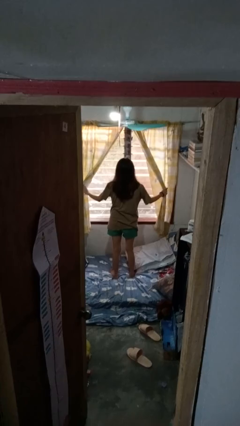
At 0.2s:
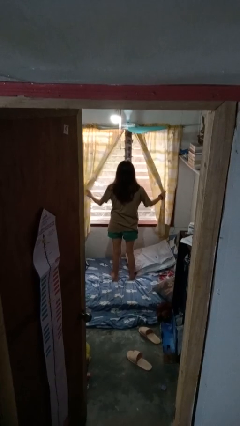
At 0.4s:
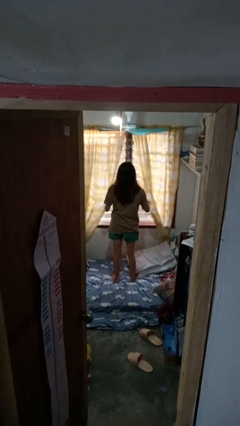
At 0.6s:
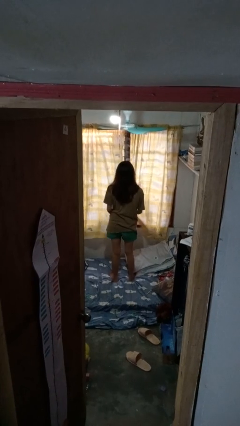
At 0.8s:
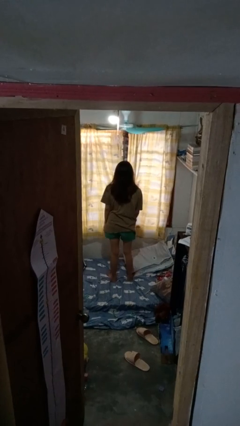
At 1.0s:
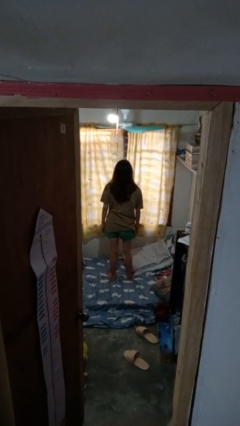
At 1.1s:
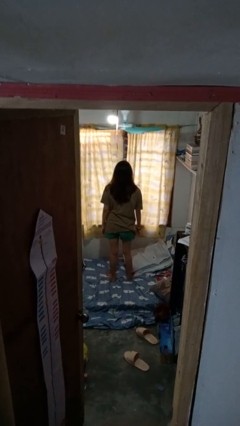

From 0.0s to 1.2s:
person closes curtains

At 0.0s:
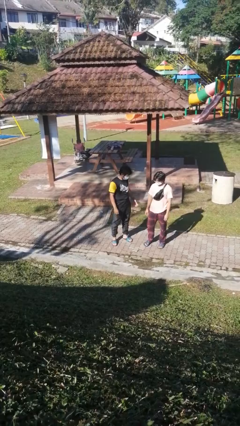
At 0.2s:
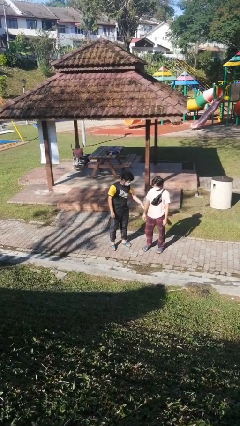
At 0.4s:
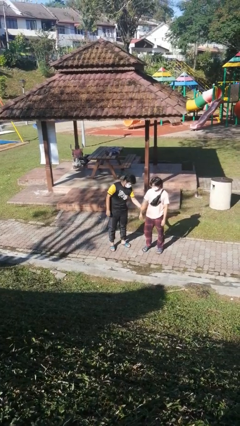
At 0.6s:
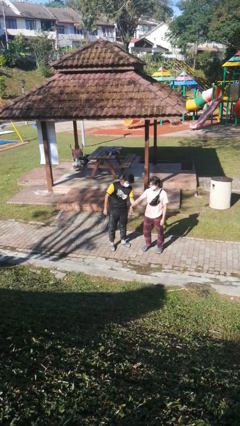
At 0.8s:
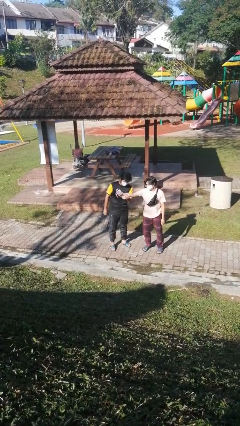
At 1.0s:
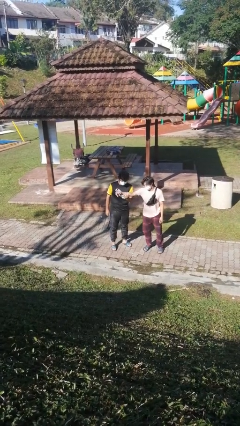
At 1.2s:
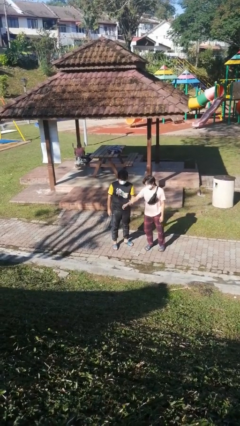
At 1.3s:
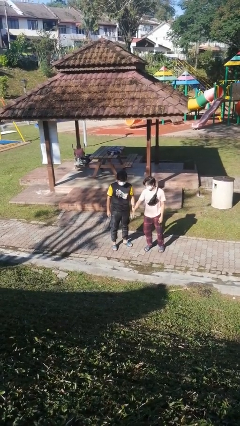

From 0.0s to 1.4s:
person grabs person by forearm

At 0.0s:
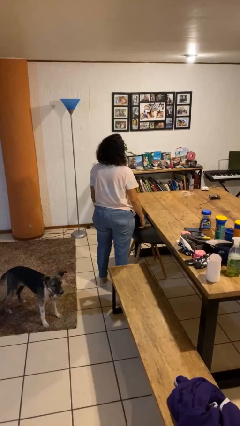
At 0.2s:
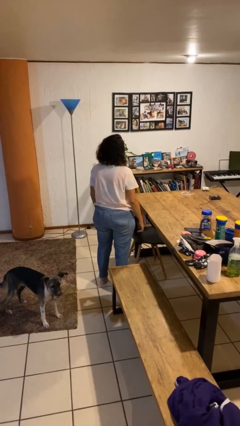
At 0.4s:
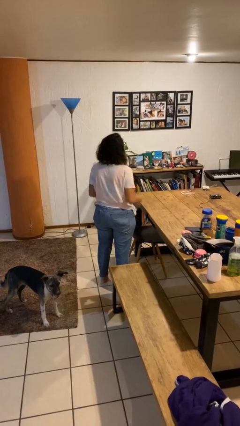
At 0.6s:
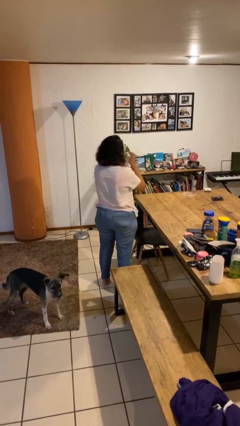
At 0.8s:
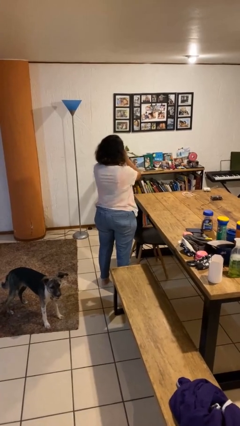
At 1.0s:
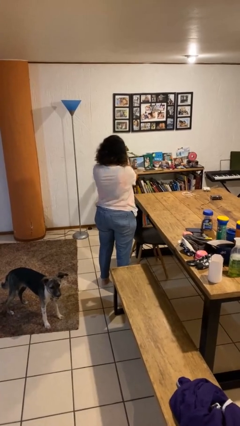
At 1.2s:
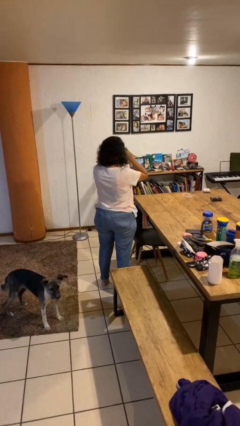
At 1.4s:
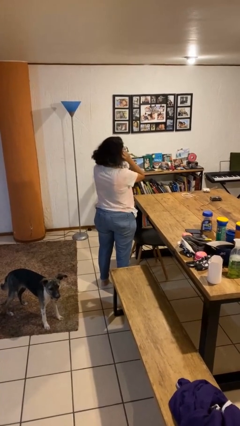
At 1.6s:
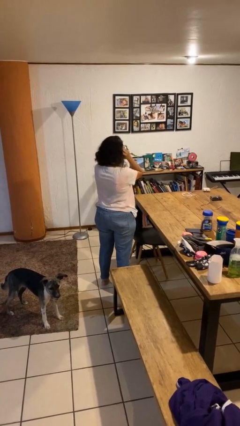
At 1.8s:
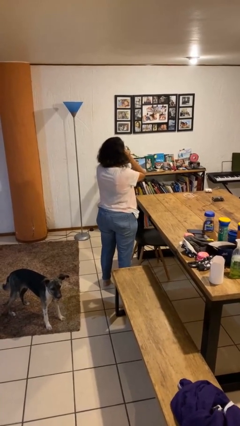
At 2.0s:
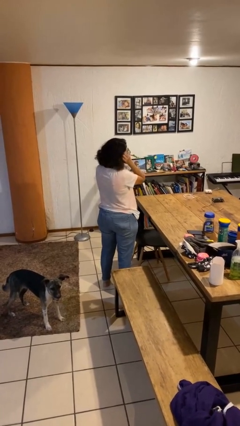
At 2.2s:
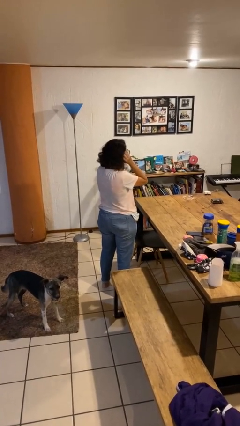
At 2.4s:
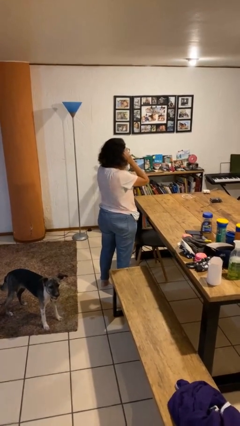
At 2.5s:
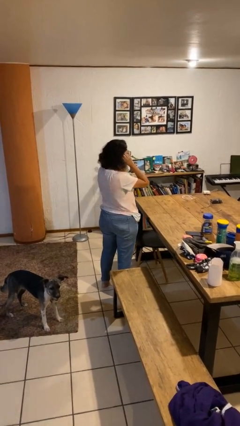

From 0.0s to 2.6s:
person puts fingers in ear

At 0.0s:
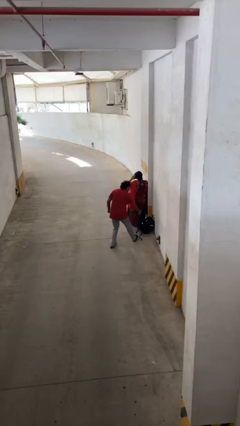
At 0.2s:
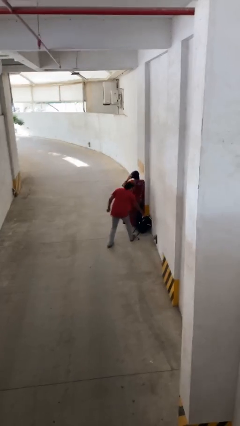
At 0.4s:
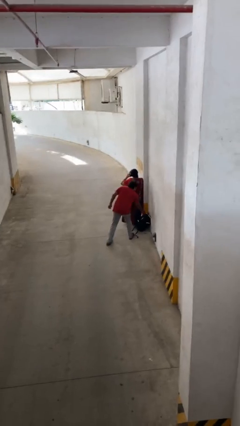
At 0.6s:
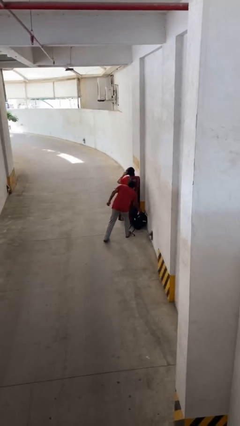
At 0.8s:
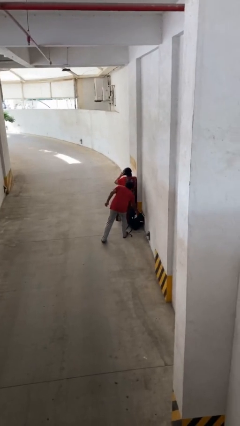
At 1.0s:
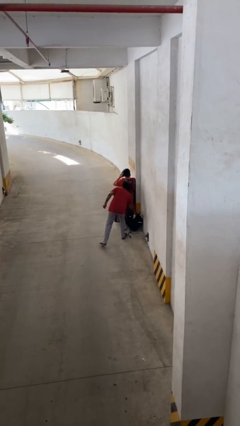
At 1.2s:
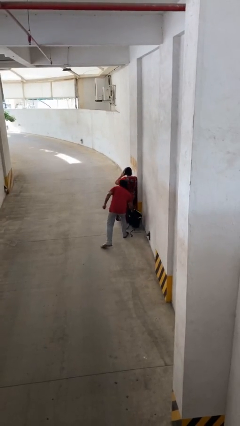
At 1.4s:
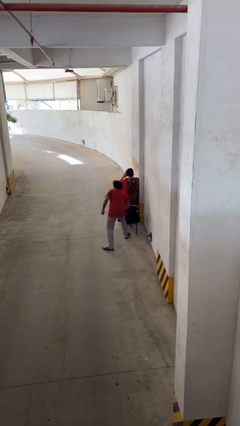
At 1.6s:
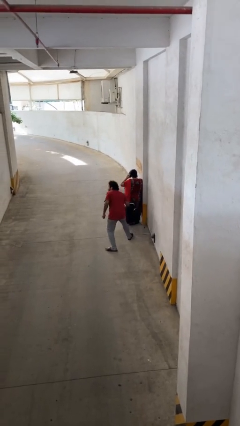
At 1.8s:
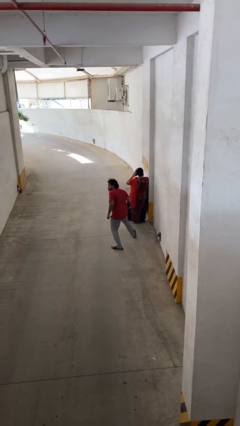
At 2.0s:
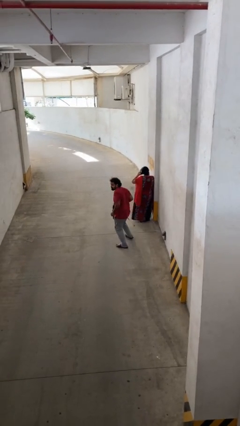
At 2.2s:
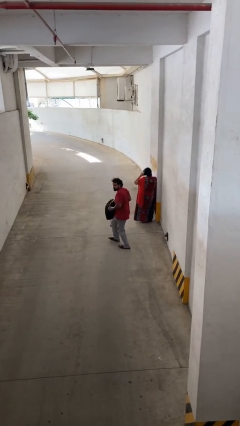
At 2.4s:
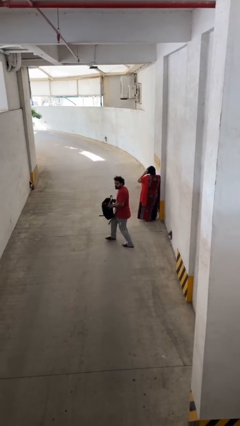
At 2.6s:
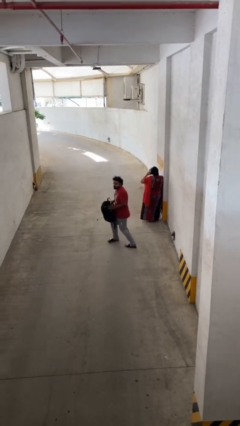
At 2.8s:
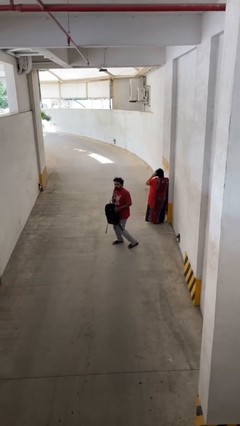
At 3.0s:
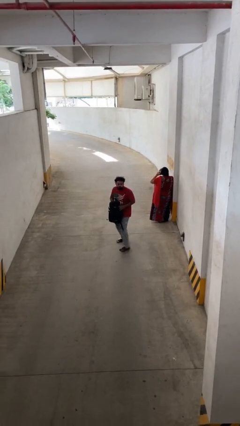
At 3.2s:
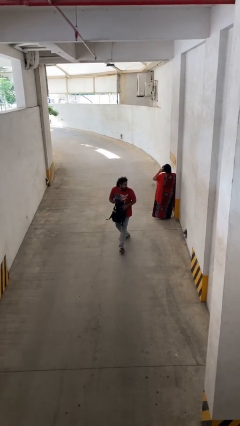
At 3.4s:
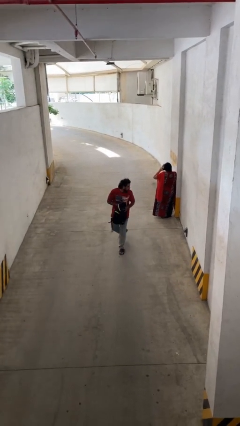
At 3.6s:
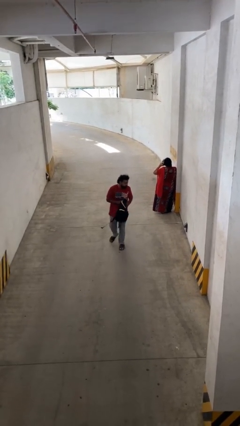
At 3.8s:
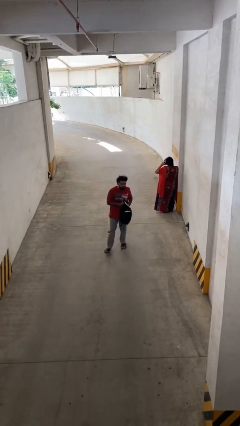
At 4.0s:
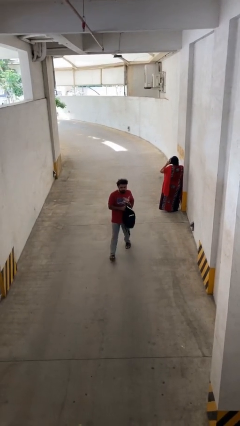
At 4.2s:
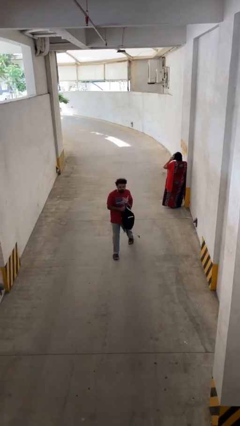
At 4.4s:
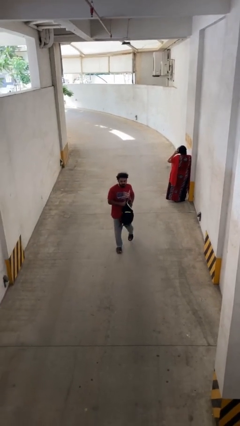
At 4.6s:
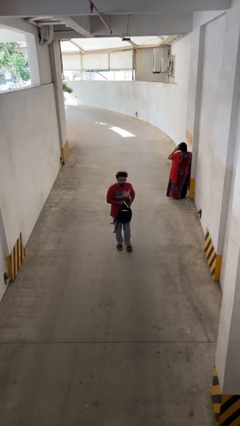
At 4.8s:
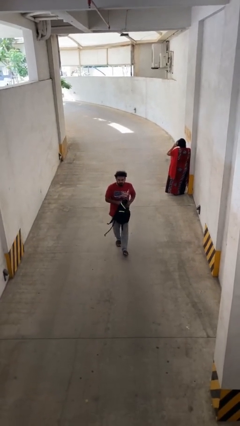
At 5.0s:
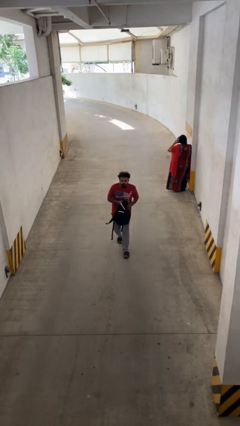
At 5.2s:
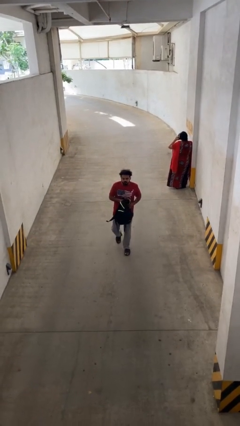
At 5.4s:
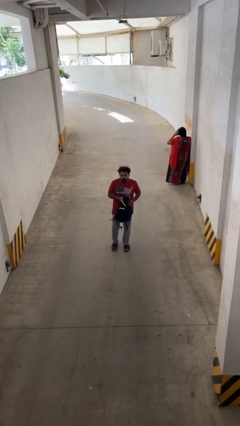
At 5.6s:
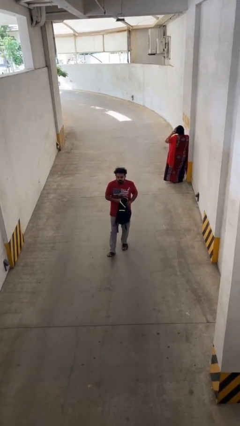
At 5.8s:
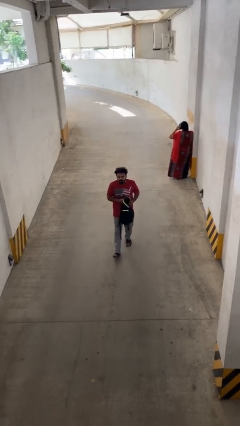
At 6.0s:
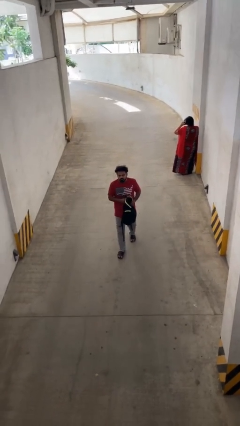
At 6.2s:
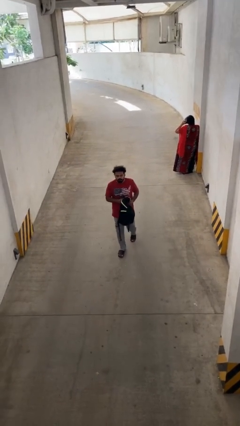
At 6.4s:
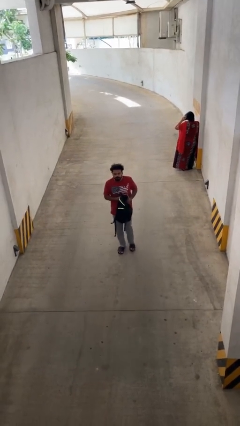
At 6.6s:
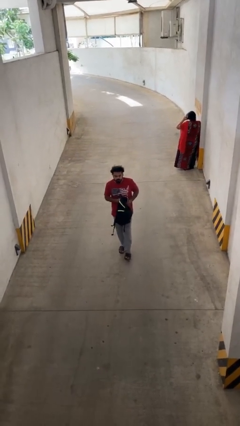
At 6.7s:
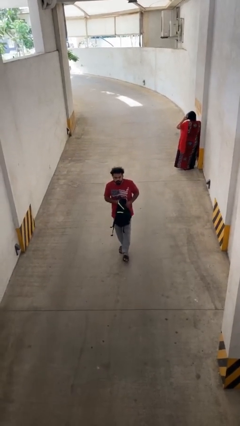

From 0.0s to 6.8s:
person steals object from person

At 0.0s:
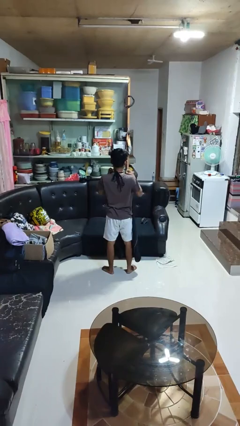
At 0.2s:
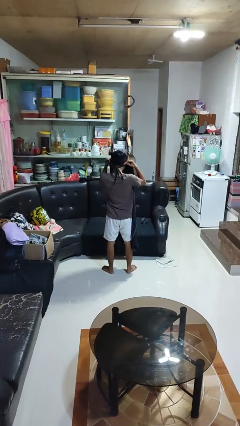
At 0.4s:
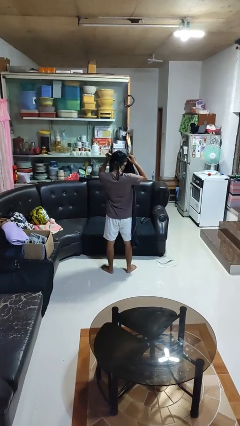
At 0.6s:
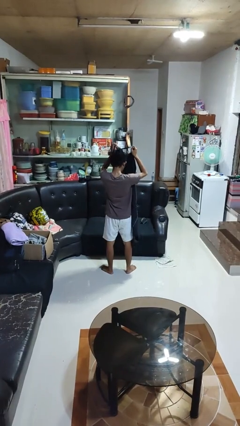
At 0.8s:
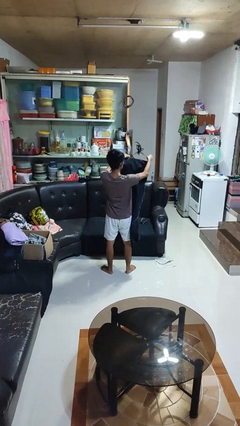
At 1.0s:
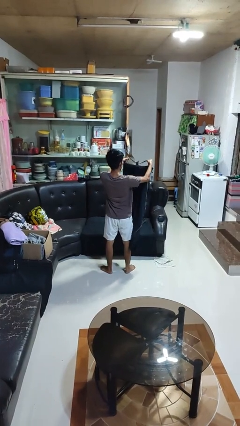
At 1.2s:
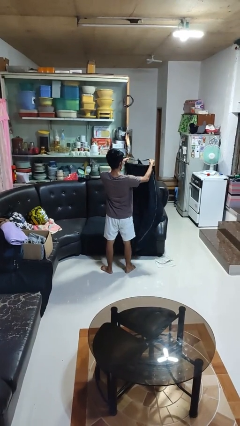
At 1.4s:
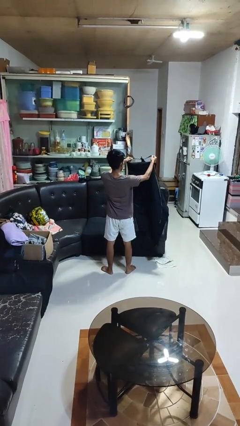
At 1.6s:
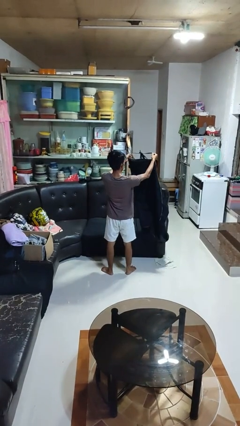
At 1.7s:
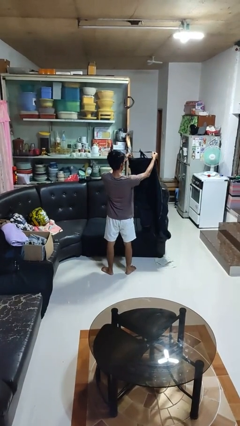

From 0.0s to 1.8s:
person takes off apron

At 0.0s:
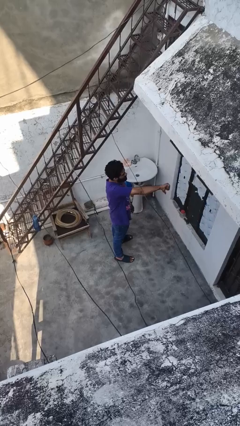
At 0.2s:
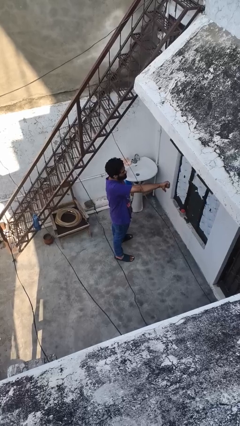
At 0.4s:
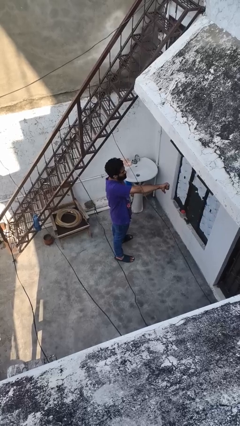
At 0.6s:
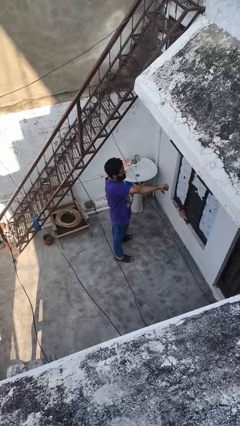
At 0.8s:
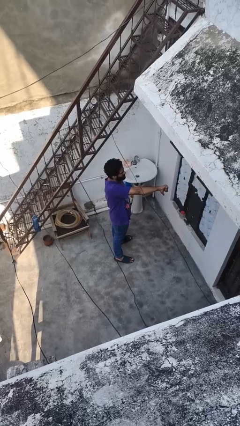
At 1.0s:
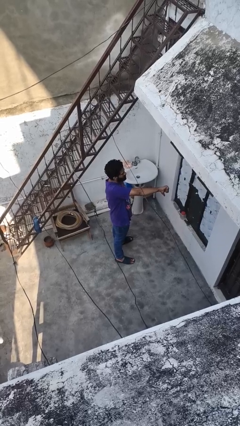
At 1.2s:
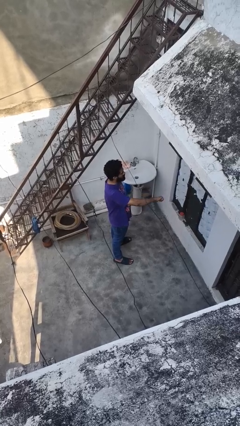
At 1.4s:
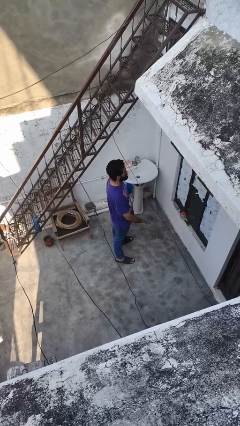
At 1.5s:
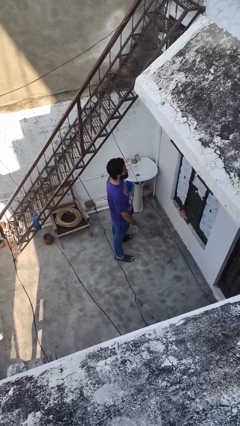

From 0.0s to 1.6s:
person gestures thumbs down

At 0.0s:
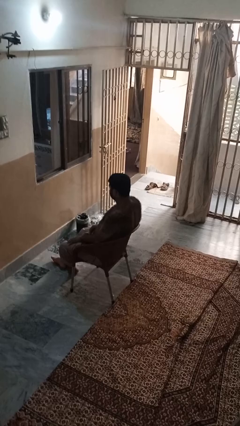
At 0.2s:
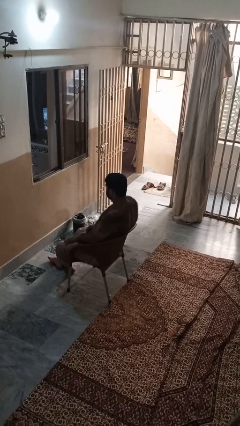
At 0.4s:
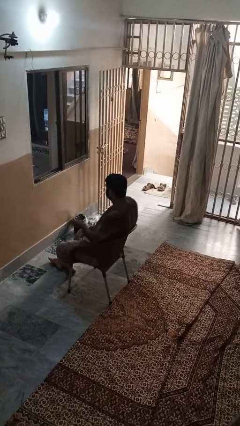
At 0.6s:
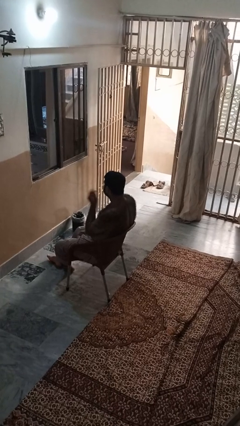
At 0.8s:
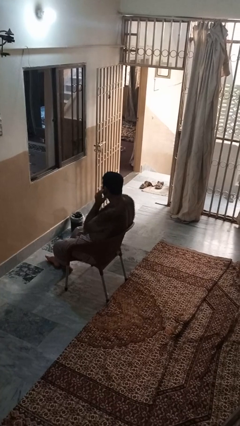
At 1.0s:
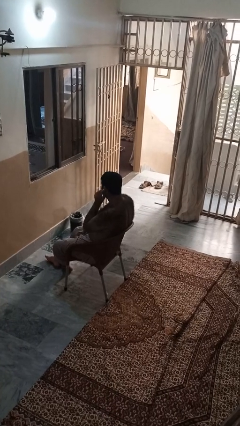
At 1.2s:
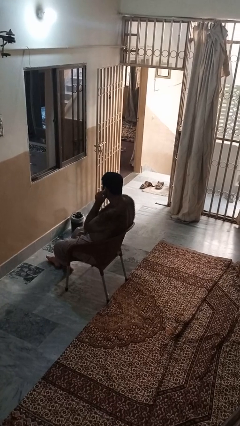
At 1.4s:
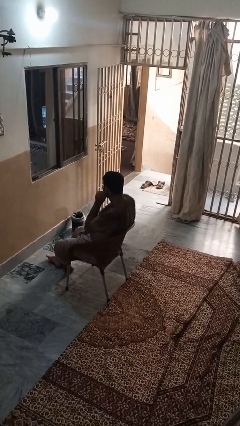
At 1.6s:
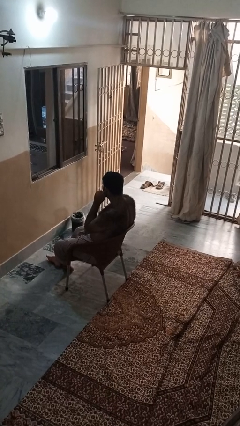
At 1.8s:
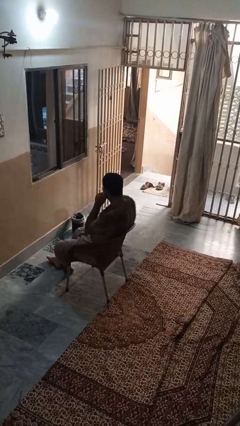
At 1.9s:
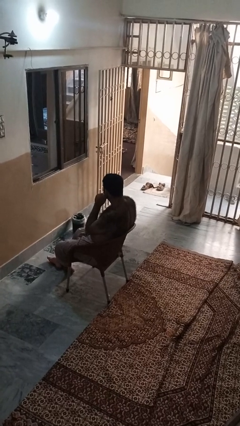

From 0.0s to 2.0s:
person touches earlobe
